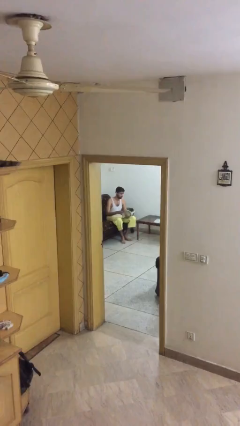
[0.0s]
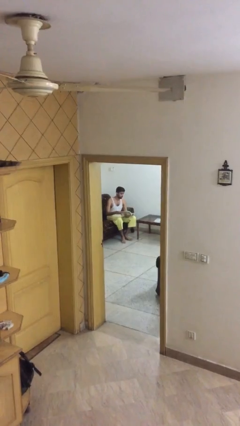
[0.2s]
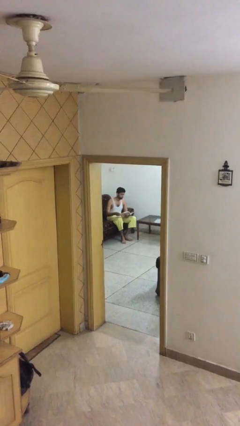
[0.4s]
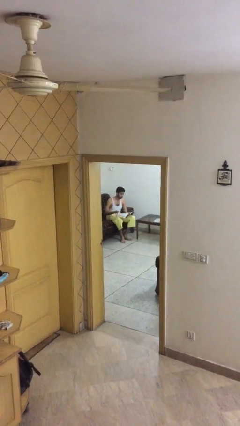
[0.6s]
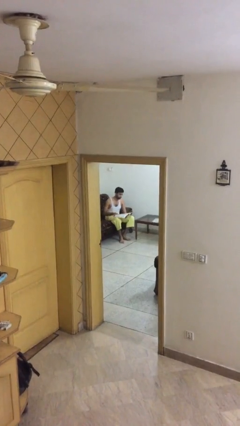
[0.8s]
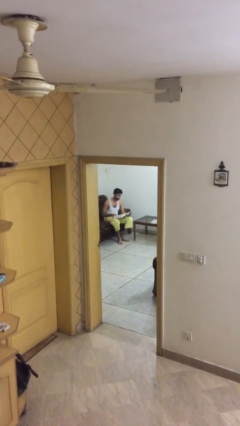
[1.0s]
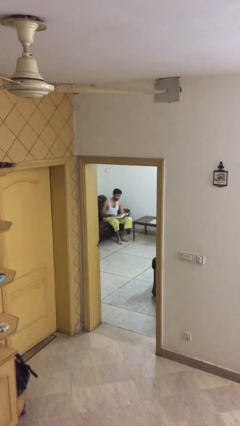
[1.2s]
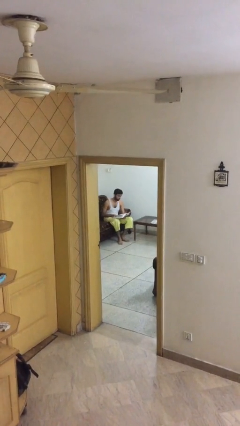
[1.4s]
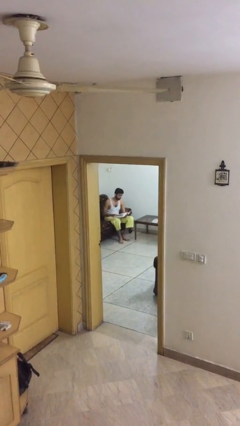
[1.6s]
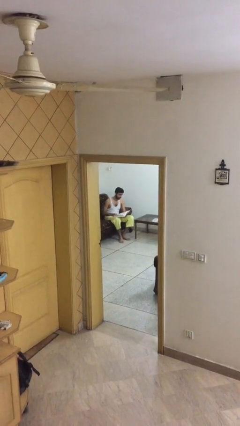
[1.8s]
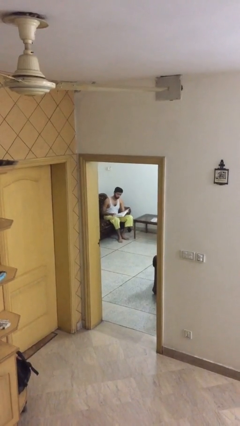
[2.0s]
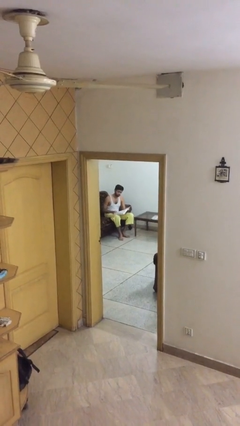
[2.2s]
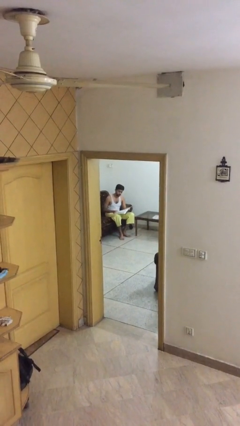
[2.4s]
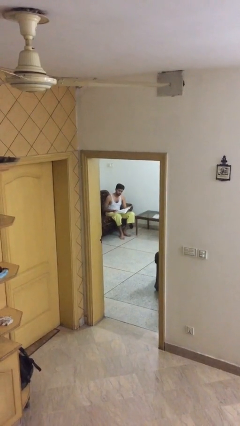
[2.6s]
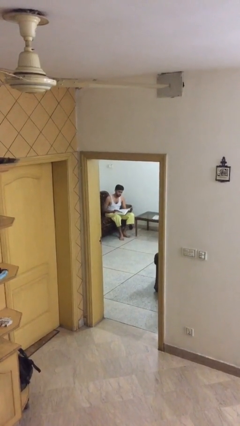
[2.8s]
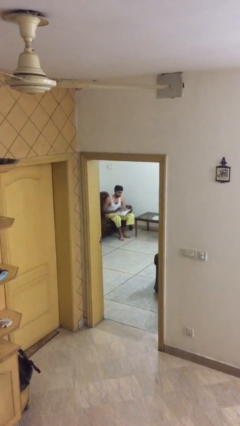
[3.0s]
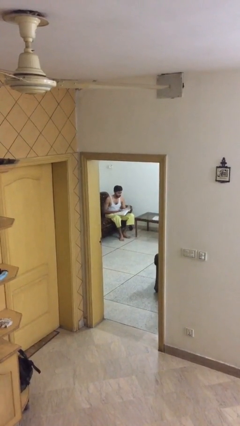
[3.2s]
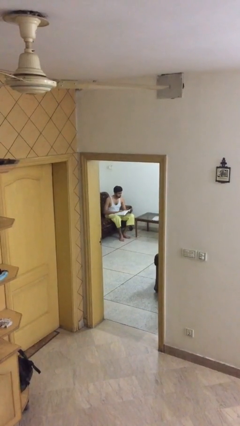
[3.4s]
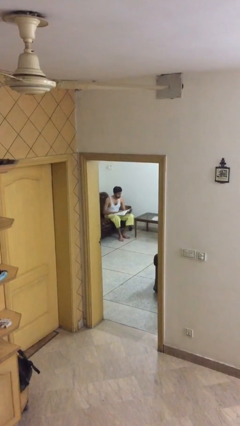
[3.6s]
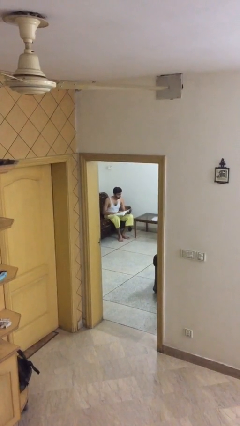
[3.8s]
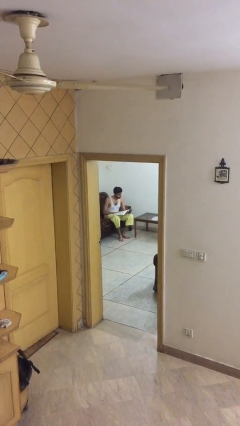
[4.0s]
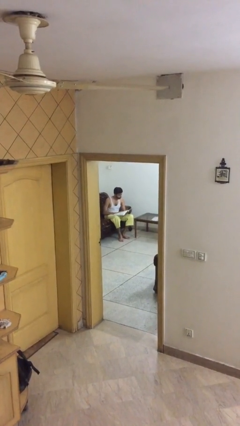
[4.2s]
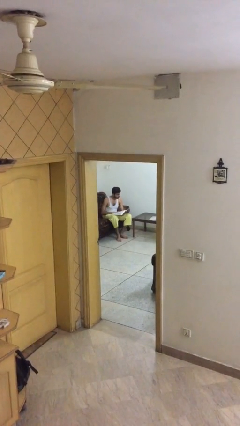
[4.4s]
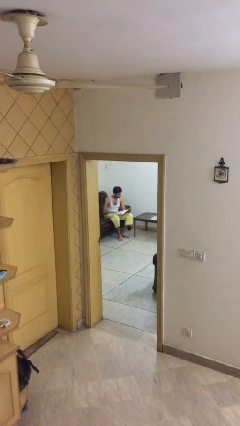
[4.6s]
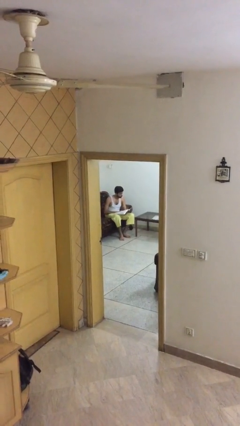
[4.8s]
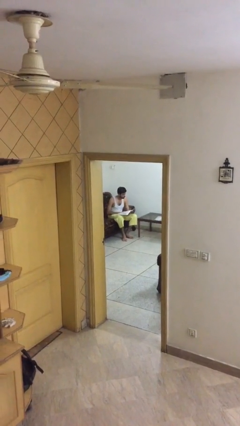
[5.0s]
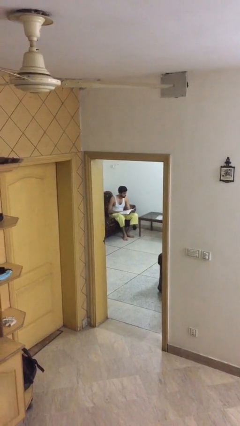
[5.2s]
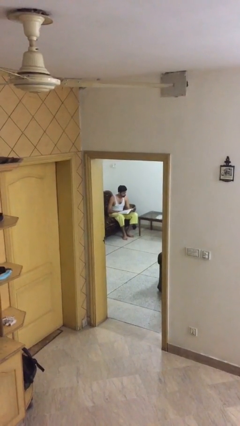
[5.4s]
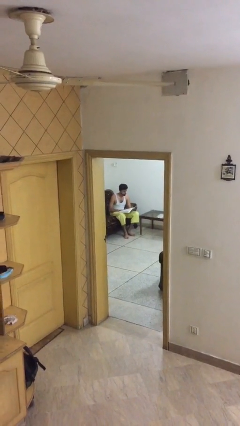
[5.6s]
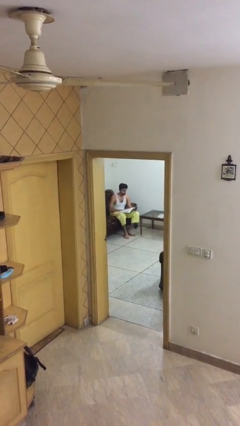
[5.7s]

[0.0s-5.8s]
person reads document

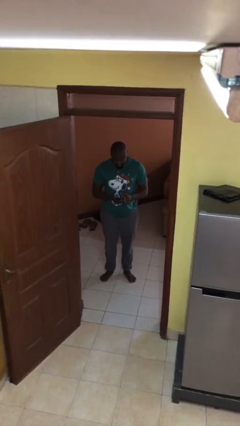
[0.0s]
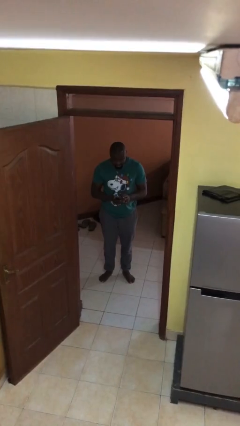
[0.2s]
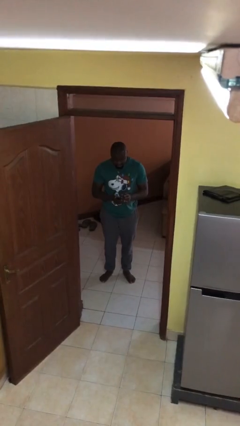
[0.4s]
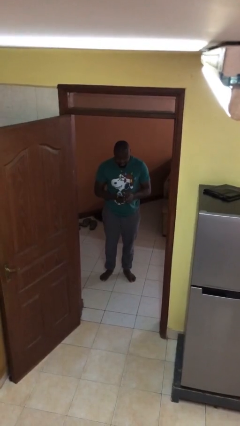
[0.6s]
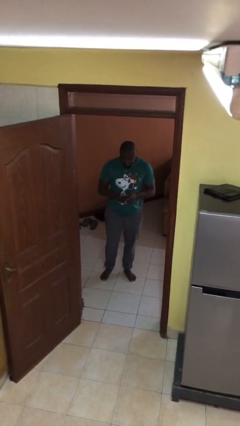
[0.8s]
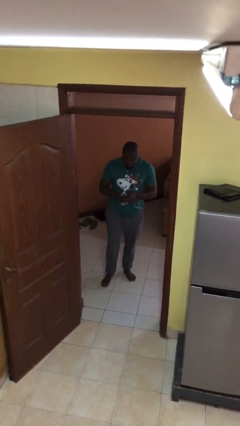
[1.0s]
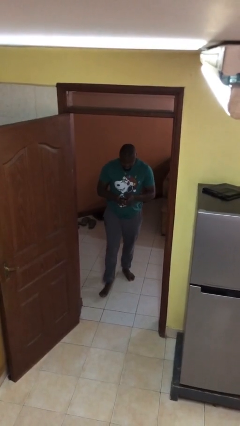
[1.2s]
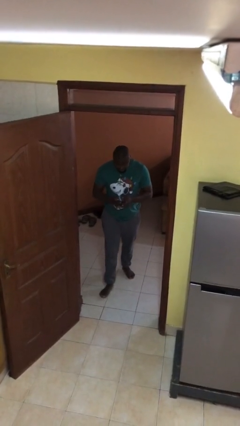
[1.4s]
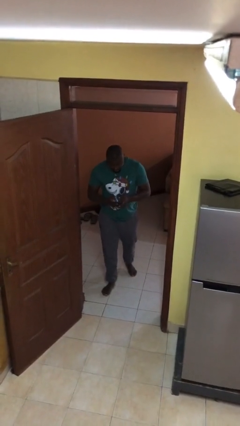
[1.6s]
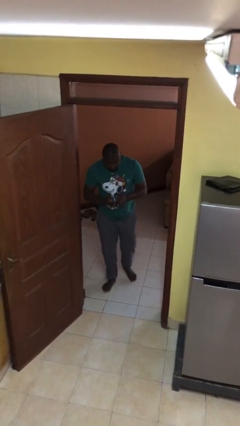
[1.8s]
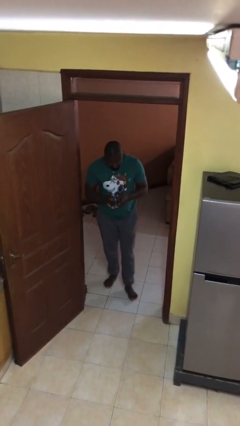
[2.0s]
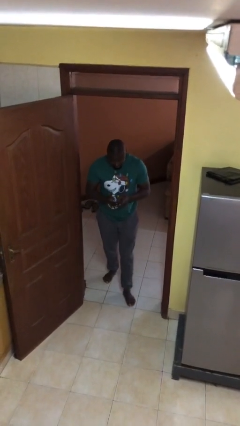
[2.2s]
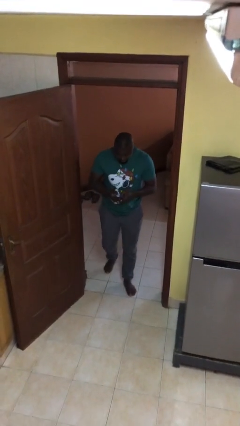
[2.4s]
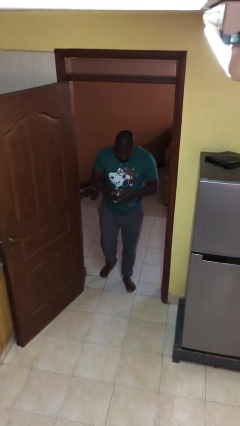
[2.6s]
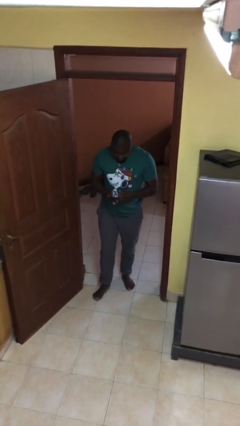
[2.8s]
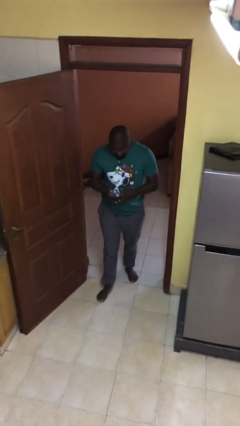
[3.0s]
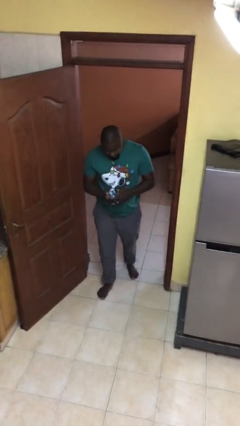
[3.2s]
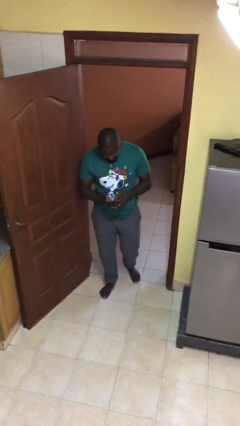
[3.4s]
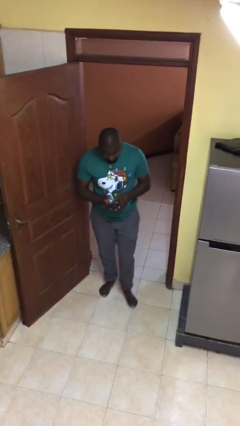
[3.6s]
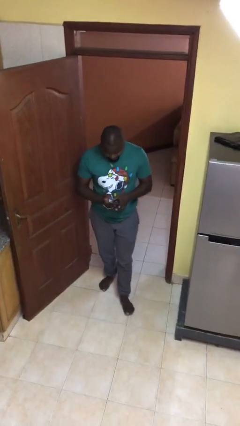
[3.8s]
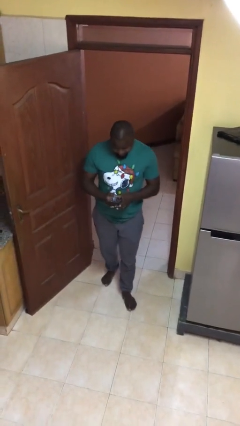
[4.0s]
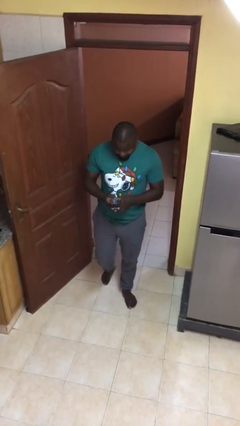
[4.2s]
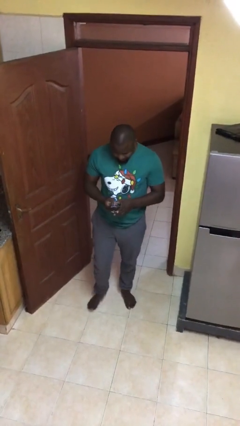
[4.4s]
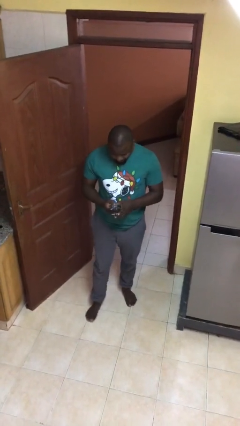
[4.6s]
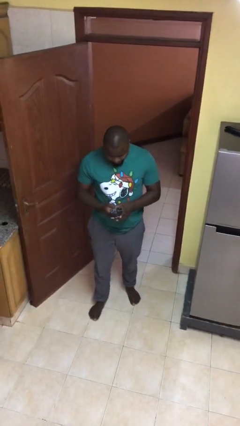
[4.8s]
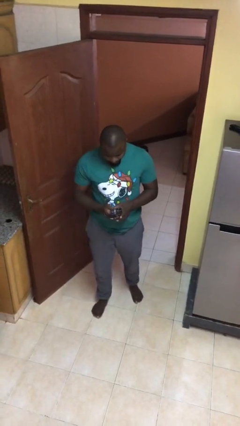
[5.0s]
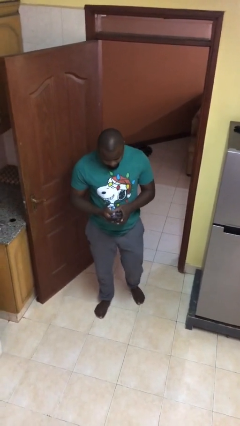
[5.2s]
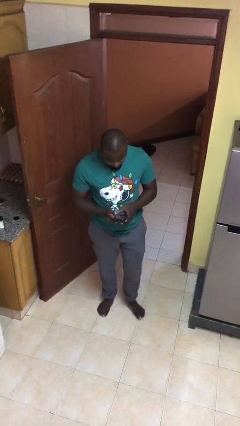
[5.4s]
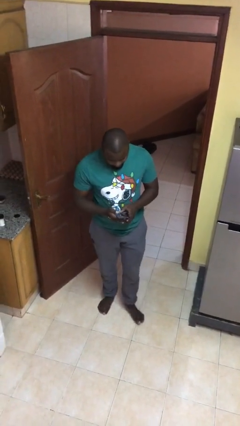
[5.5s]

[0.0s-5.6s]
person enters scene through structure

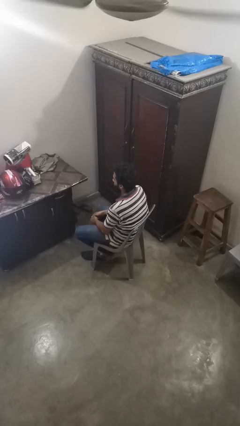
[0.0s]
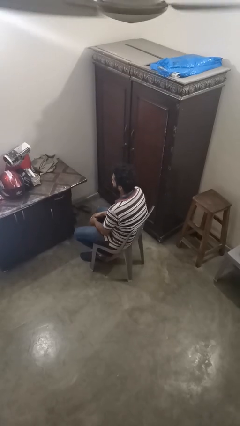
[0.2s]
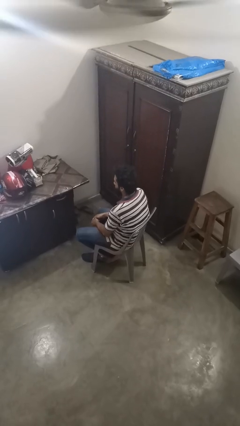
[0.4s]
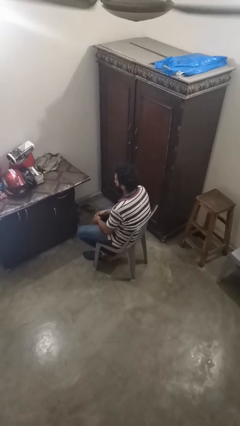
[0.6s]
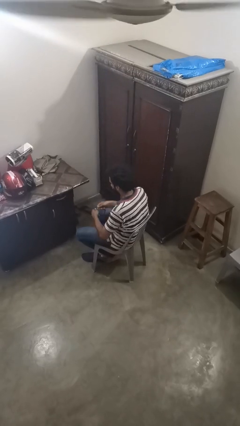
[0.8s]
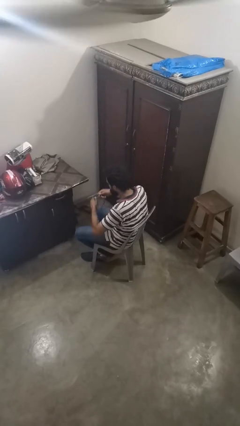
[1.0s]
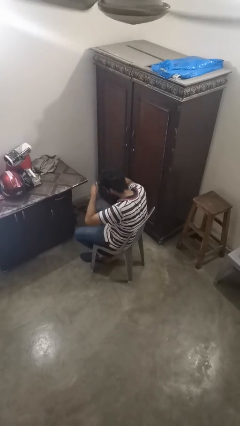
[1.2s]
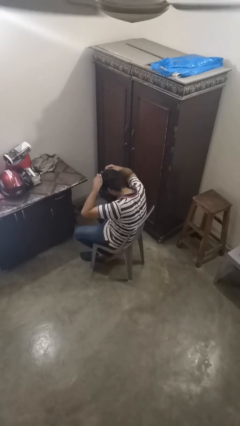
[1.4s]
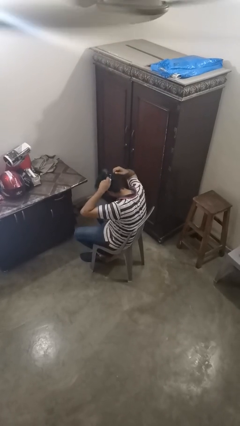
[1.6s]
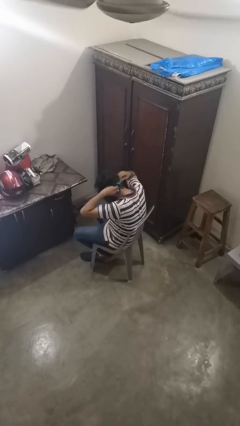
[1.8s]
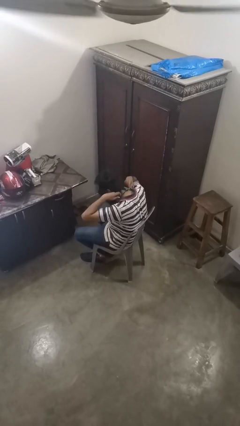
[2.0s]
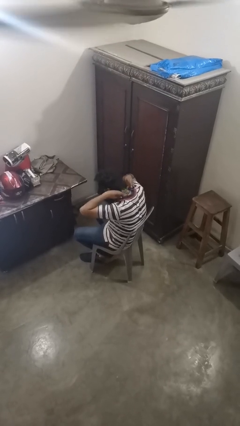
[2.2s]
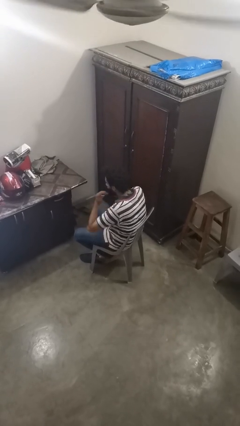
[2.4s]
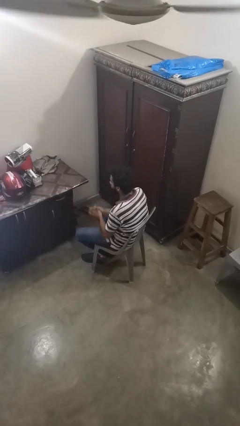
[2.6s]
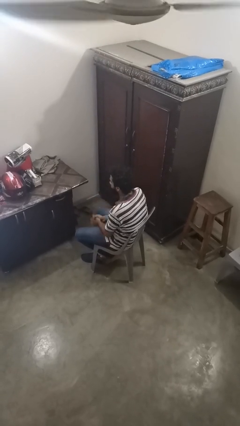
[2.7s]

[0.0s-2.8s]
person puts on necklace

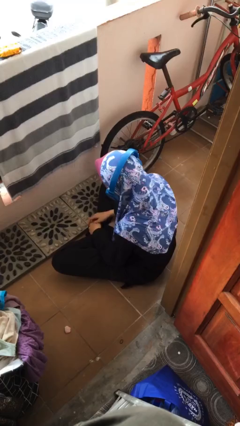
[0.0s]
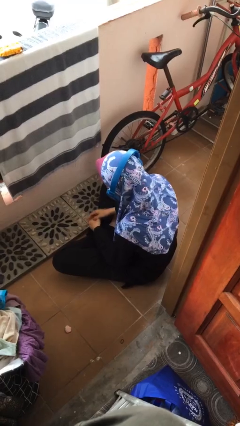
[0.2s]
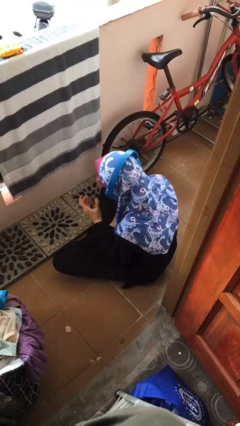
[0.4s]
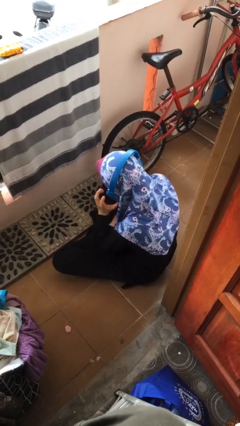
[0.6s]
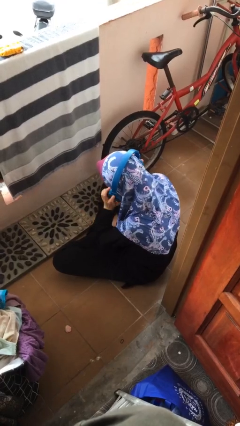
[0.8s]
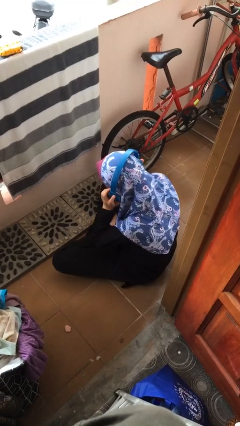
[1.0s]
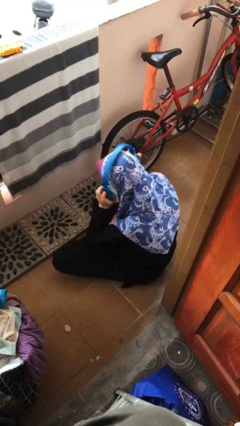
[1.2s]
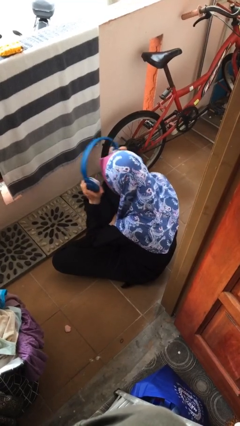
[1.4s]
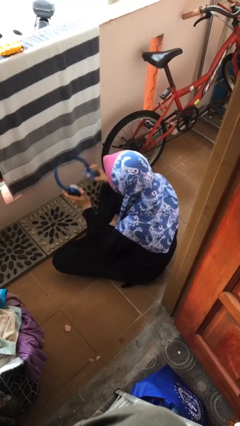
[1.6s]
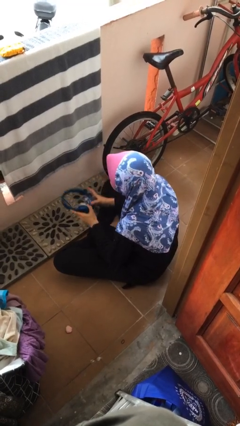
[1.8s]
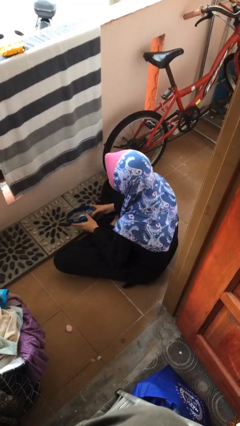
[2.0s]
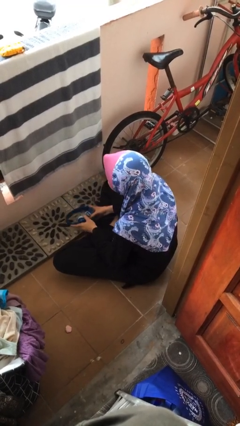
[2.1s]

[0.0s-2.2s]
person takes off headphones

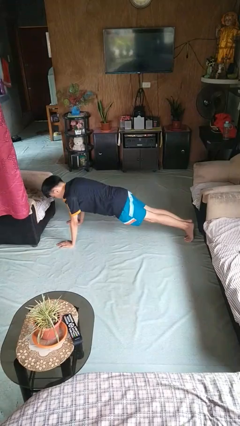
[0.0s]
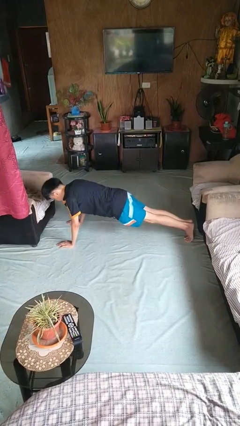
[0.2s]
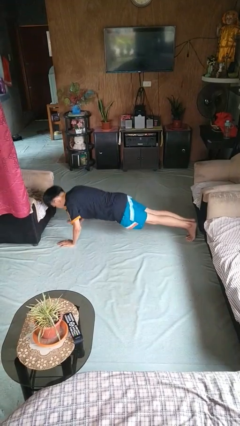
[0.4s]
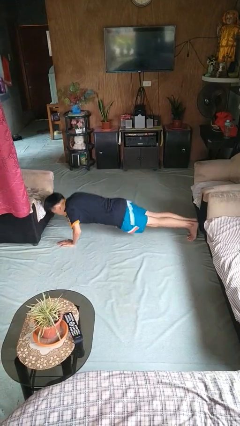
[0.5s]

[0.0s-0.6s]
person exercises with pushup

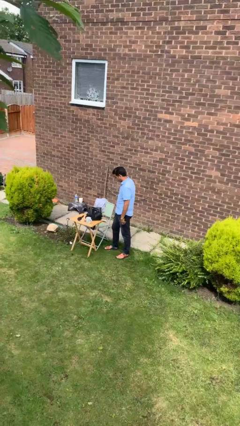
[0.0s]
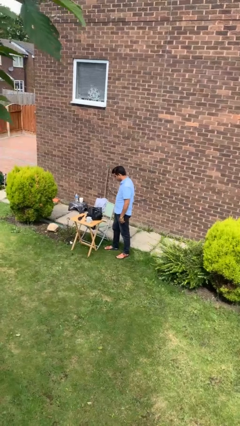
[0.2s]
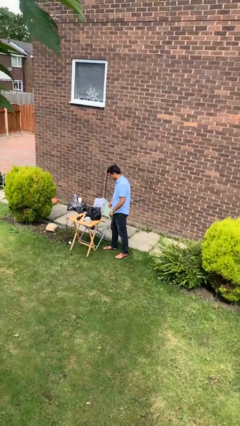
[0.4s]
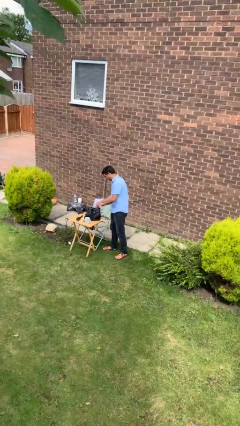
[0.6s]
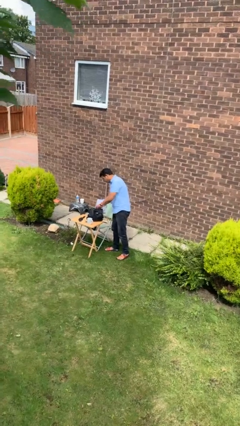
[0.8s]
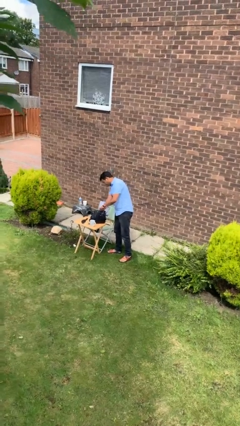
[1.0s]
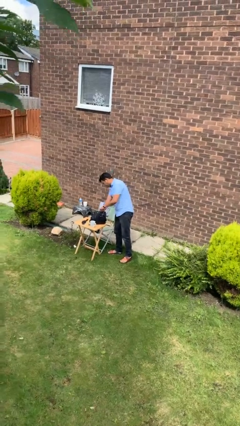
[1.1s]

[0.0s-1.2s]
person searches in backpack
